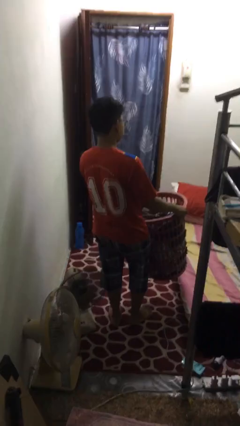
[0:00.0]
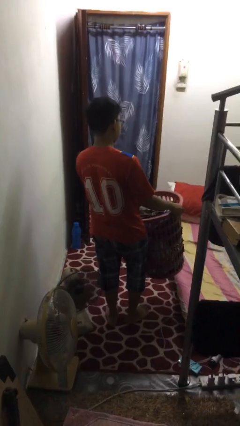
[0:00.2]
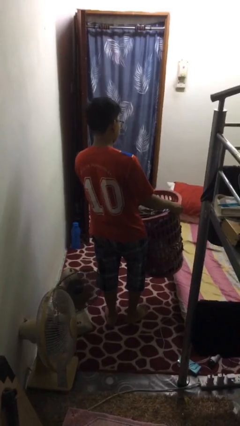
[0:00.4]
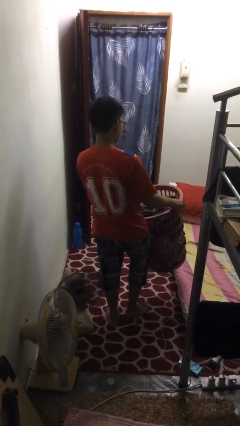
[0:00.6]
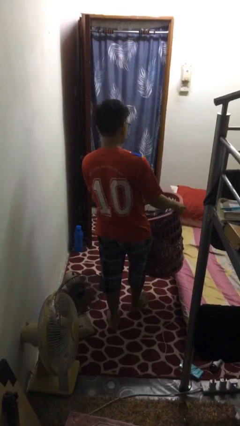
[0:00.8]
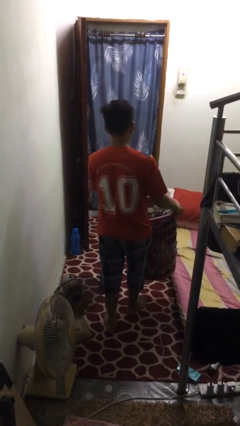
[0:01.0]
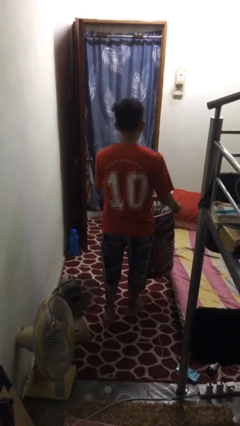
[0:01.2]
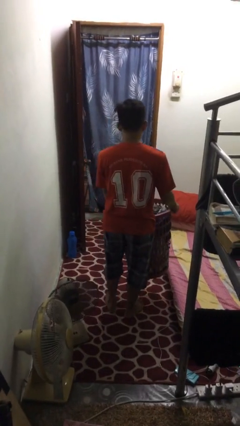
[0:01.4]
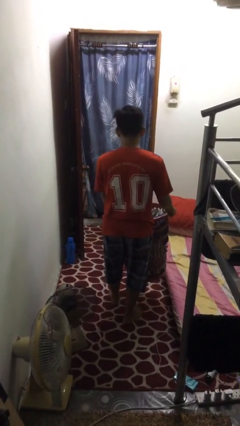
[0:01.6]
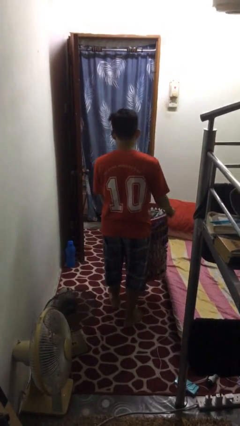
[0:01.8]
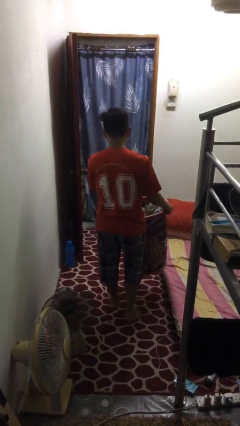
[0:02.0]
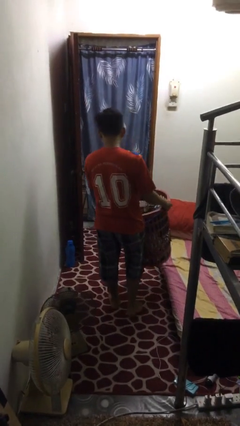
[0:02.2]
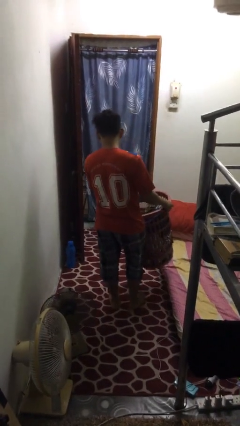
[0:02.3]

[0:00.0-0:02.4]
person carries laundry basket

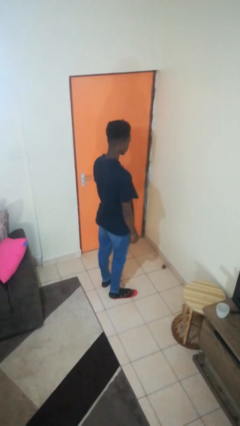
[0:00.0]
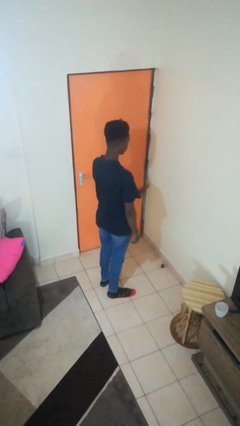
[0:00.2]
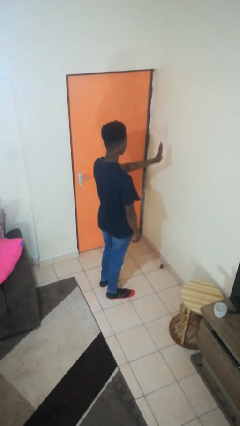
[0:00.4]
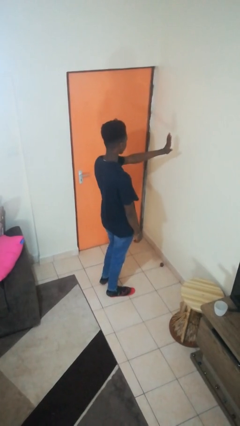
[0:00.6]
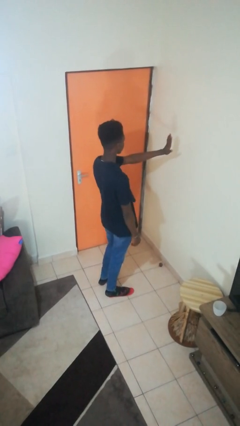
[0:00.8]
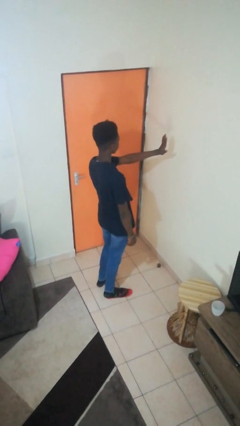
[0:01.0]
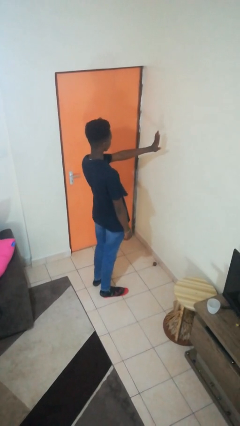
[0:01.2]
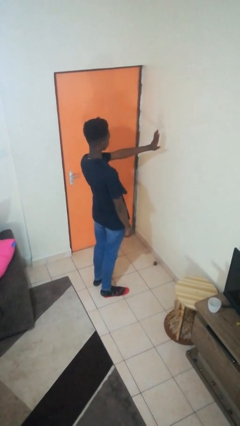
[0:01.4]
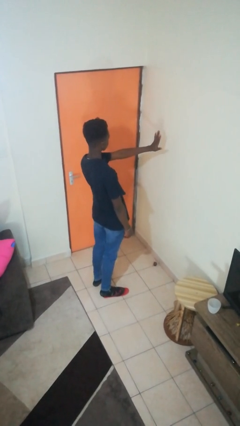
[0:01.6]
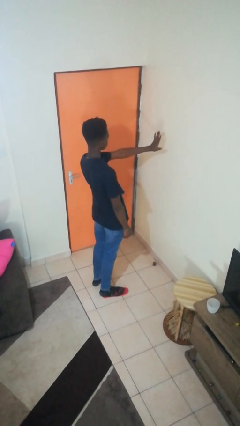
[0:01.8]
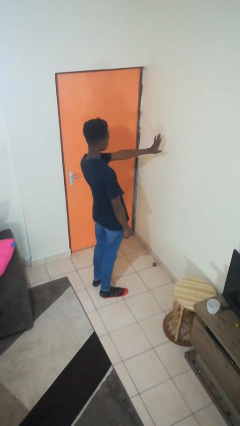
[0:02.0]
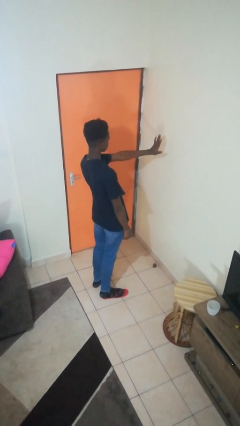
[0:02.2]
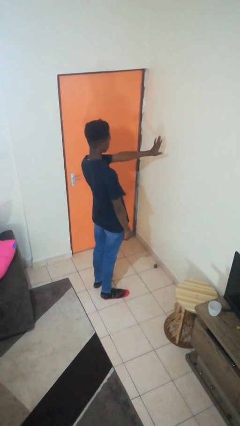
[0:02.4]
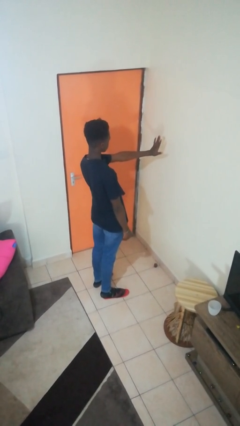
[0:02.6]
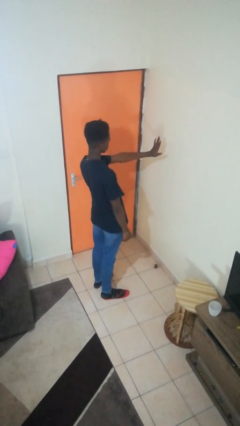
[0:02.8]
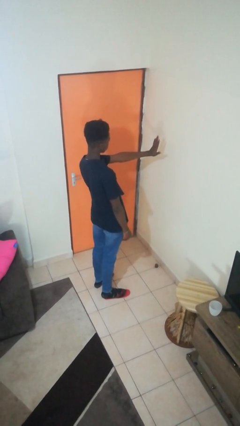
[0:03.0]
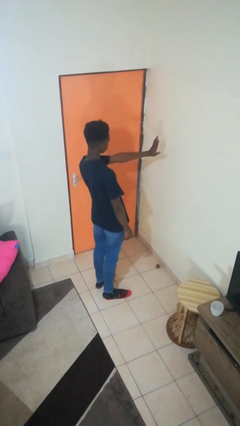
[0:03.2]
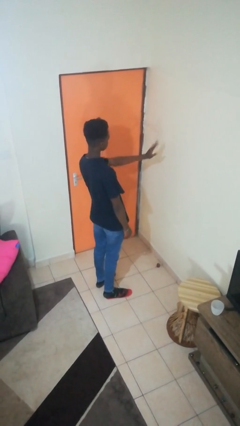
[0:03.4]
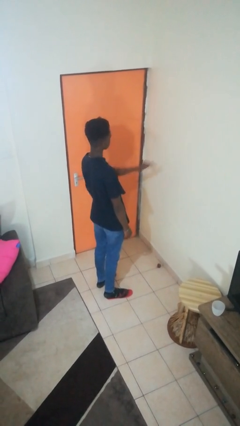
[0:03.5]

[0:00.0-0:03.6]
person gestures stop

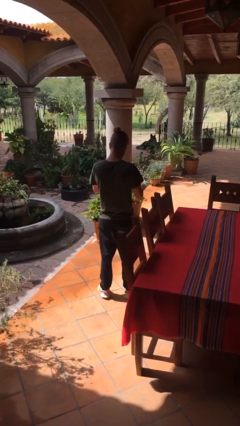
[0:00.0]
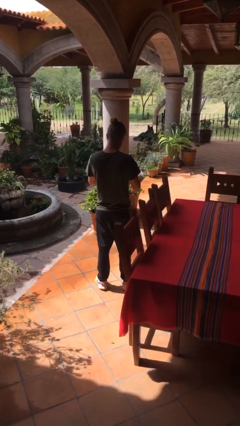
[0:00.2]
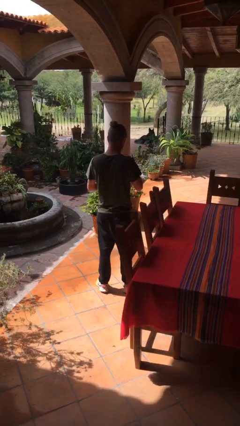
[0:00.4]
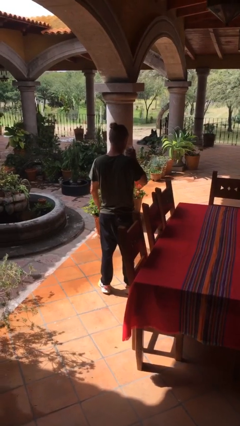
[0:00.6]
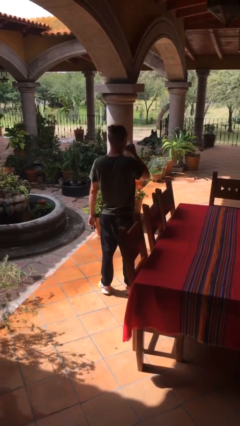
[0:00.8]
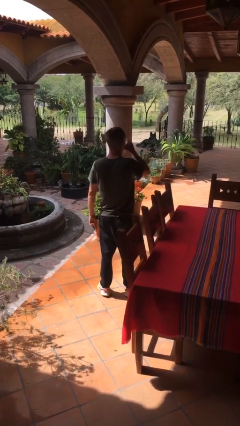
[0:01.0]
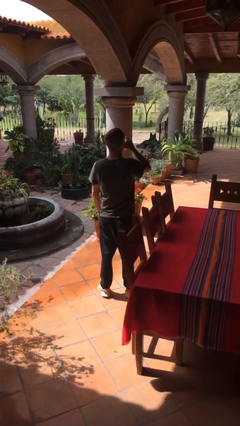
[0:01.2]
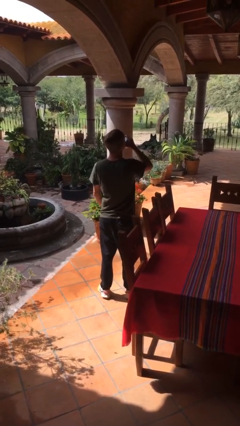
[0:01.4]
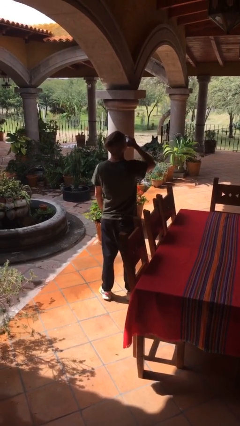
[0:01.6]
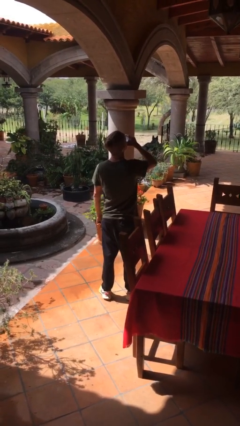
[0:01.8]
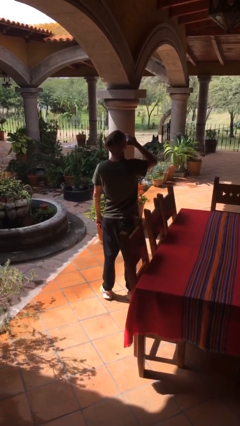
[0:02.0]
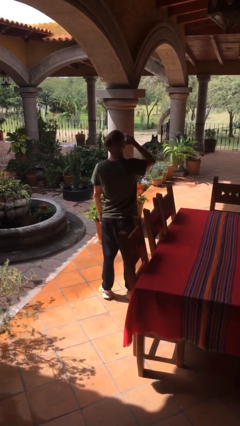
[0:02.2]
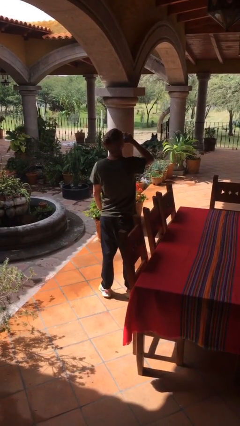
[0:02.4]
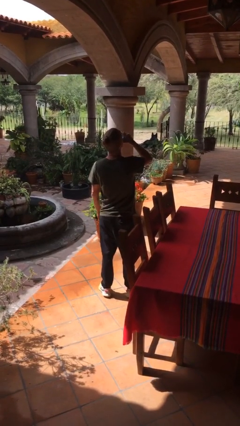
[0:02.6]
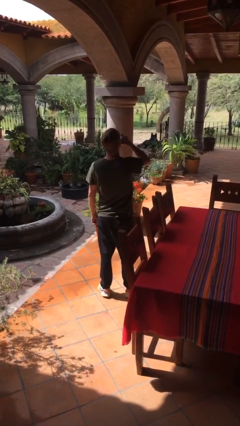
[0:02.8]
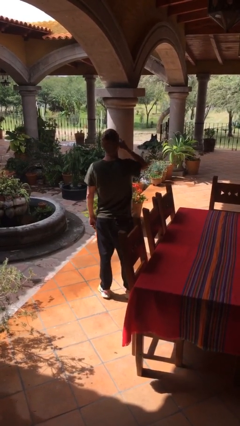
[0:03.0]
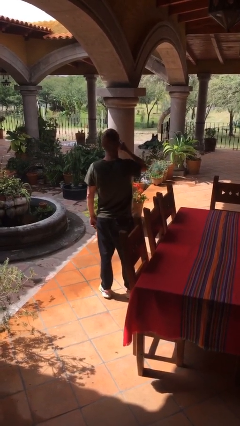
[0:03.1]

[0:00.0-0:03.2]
person drinks from beverage can

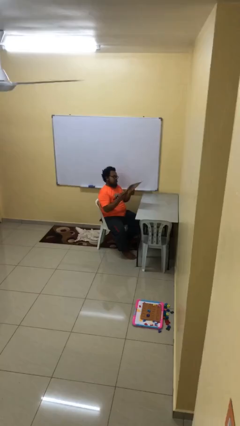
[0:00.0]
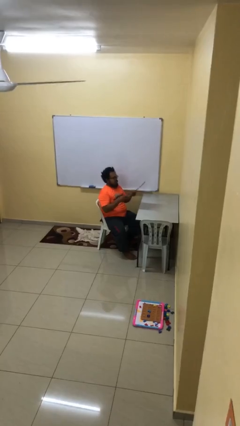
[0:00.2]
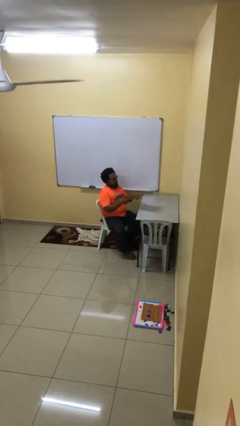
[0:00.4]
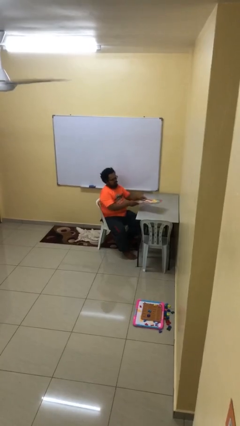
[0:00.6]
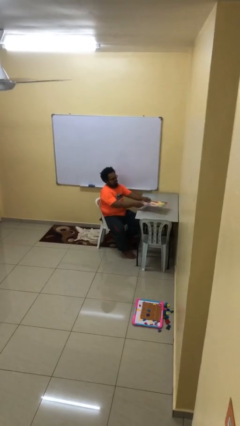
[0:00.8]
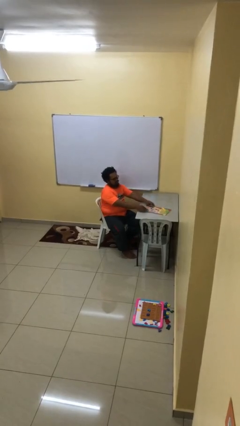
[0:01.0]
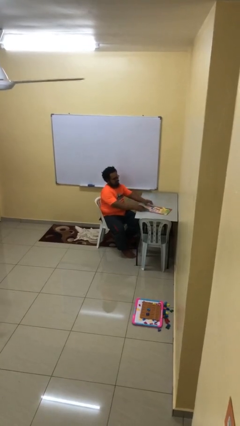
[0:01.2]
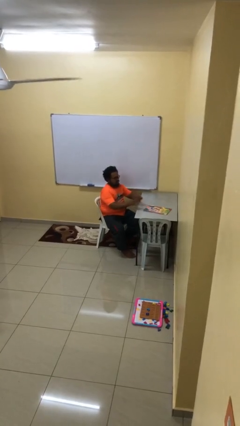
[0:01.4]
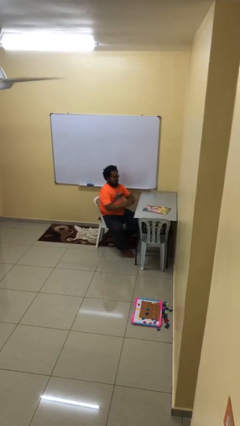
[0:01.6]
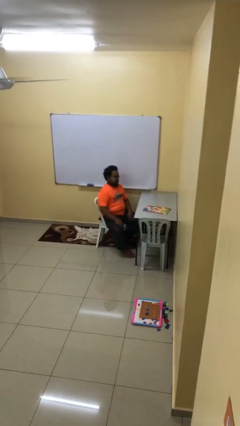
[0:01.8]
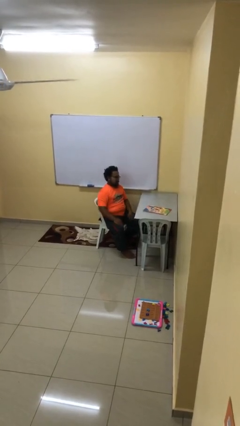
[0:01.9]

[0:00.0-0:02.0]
person puts down object on table
